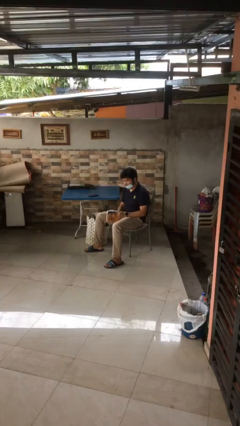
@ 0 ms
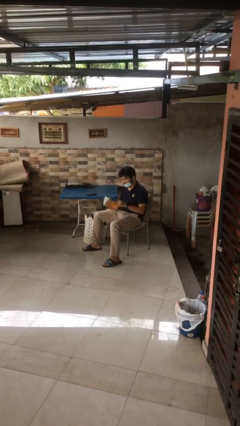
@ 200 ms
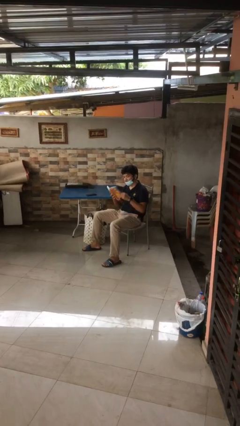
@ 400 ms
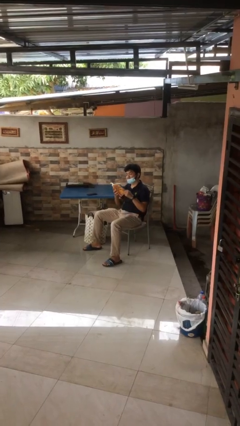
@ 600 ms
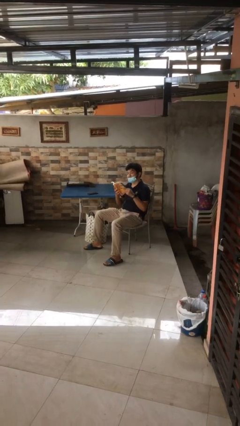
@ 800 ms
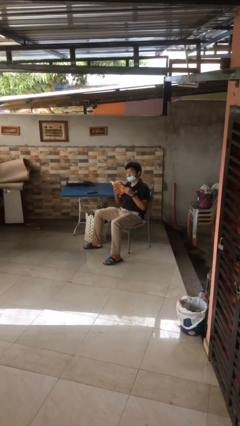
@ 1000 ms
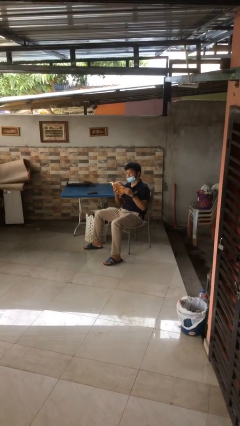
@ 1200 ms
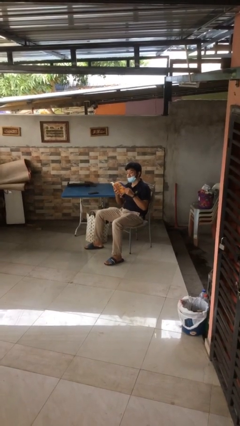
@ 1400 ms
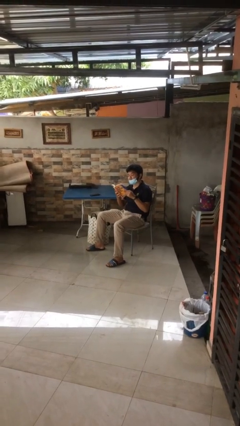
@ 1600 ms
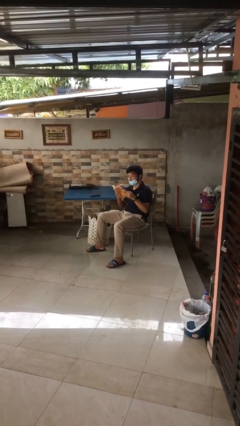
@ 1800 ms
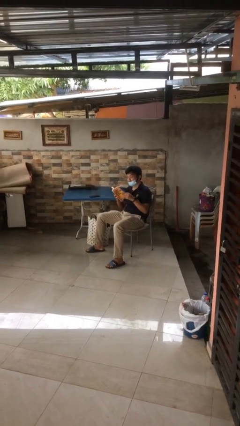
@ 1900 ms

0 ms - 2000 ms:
person reads book

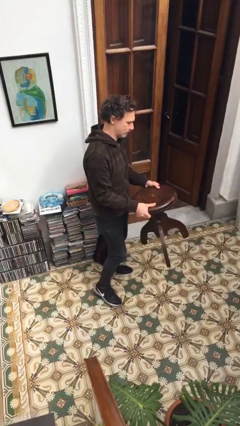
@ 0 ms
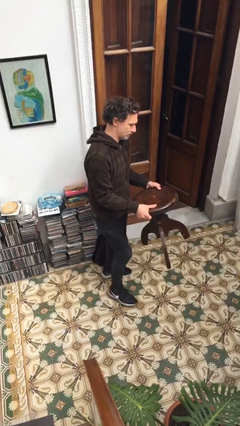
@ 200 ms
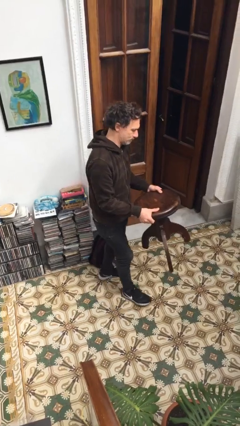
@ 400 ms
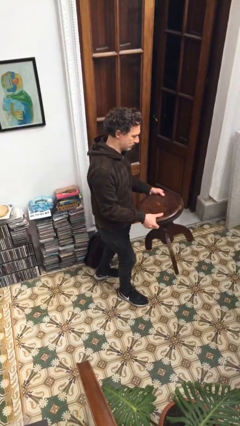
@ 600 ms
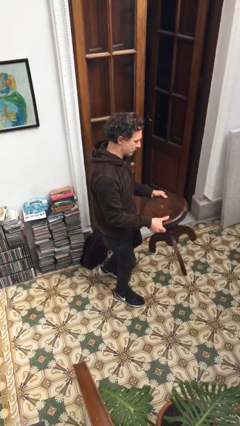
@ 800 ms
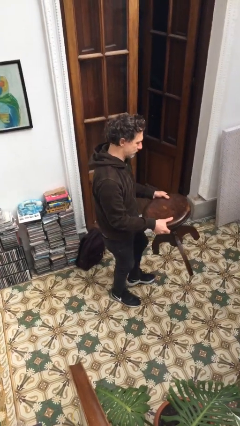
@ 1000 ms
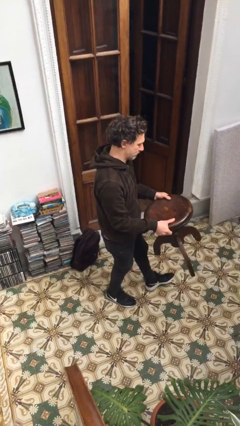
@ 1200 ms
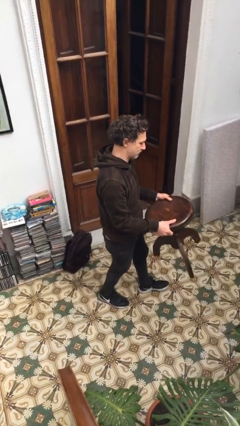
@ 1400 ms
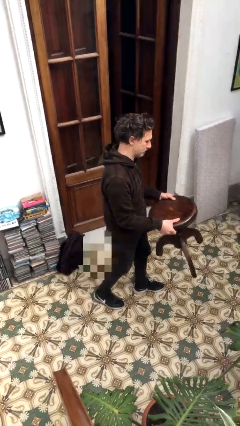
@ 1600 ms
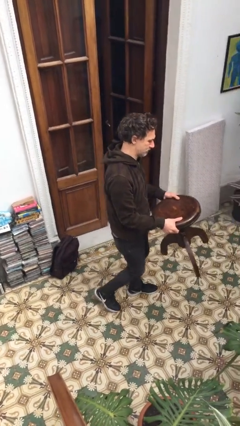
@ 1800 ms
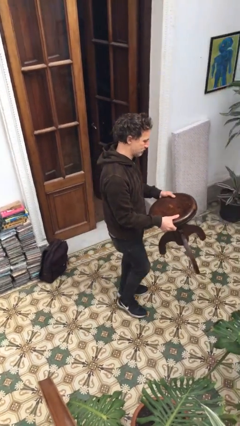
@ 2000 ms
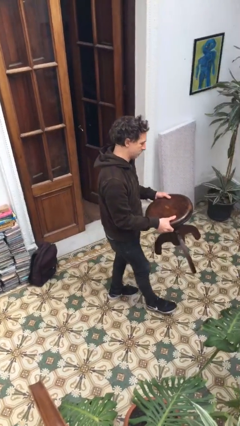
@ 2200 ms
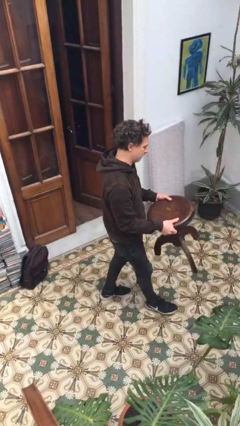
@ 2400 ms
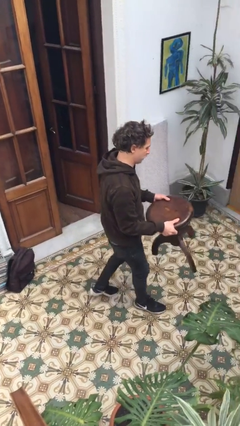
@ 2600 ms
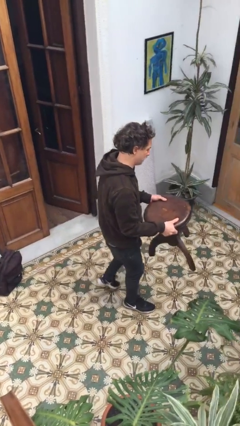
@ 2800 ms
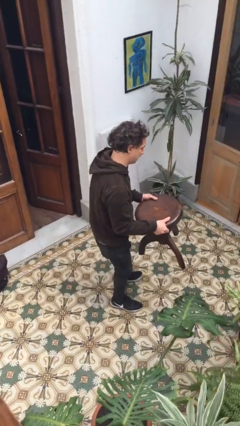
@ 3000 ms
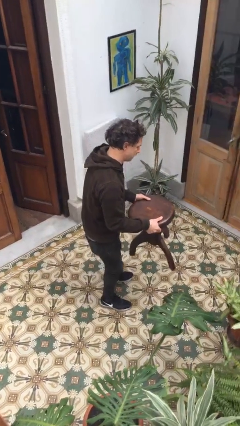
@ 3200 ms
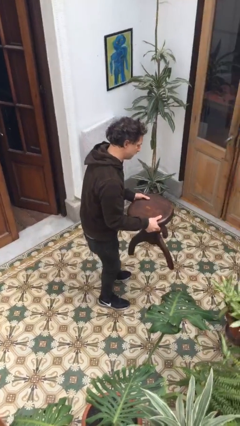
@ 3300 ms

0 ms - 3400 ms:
person carries heavy object

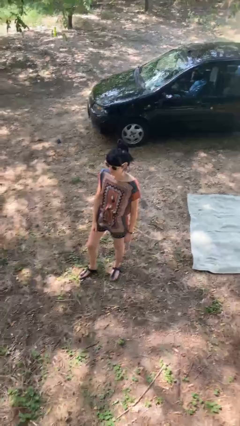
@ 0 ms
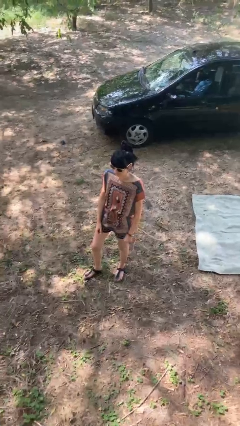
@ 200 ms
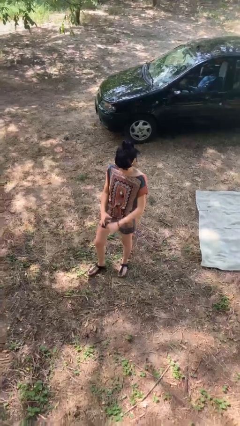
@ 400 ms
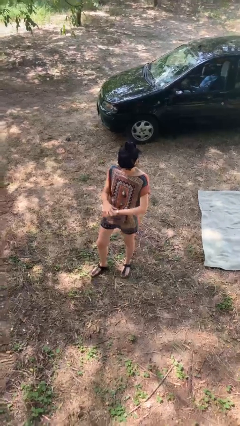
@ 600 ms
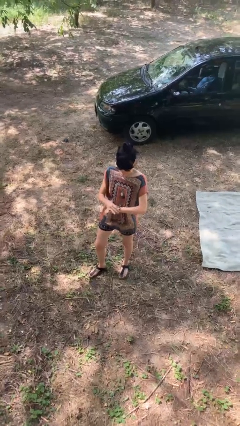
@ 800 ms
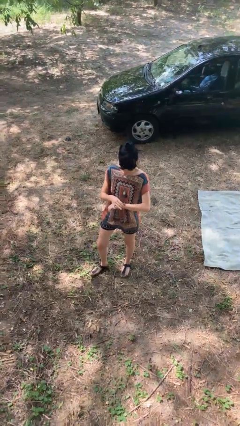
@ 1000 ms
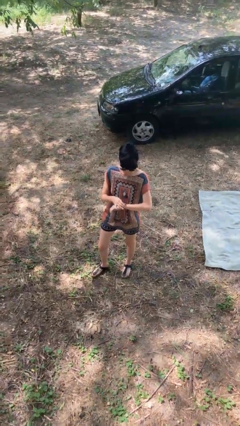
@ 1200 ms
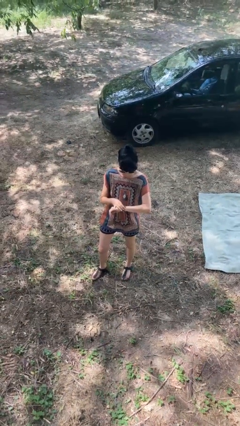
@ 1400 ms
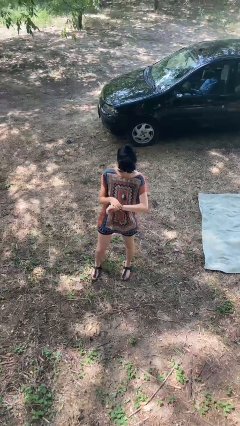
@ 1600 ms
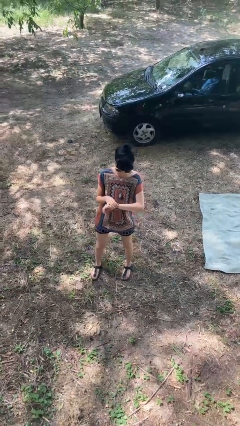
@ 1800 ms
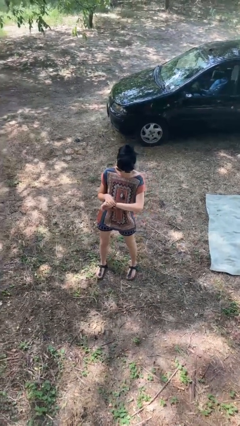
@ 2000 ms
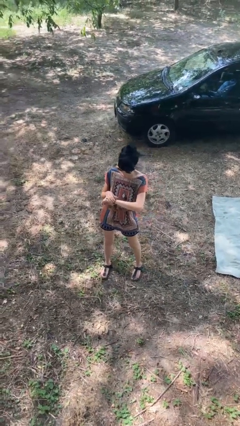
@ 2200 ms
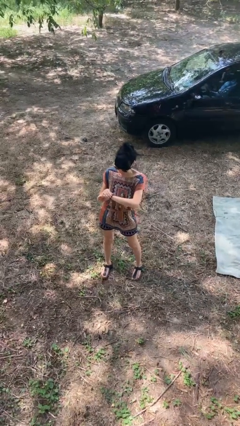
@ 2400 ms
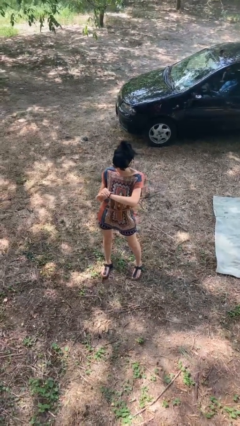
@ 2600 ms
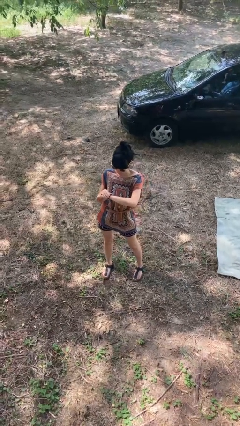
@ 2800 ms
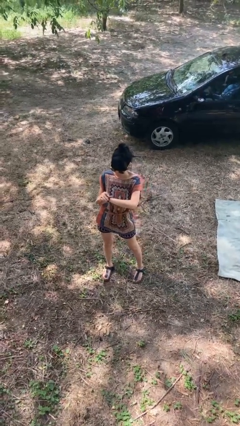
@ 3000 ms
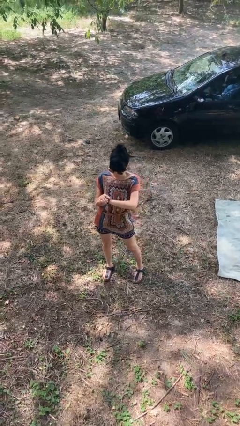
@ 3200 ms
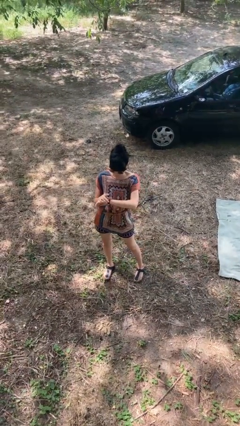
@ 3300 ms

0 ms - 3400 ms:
person looks at wristwatch

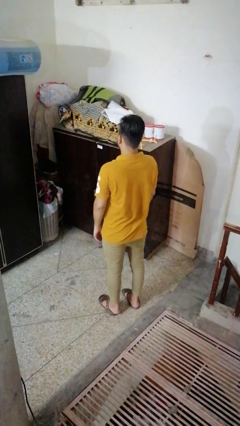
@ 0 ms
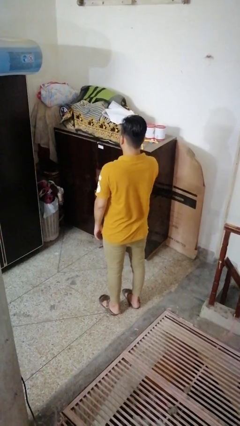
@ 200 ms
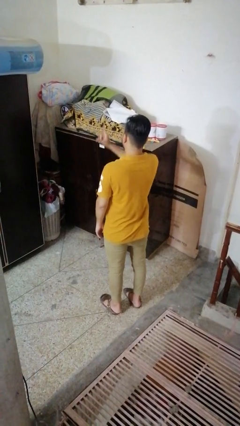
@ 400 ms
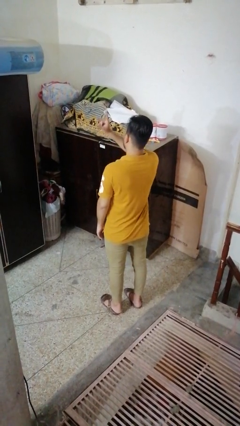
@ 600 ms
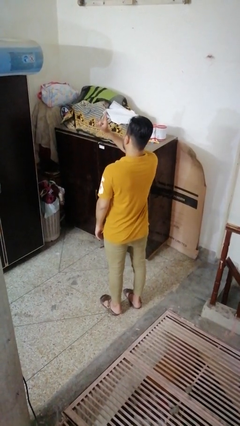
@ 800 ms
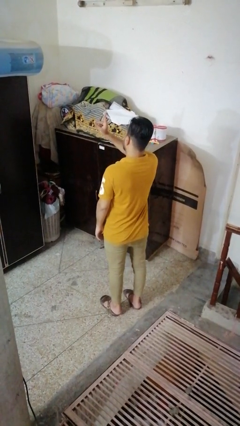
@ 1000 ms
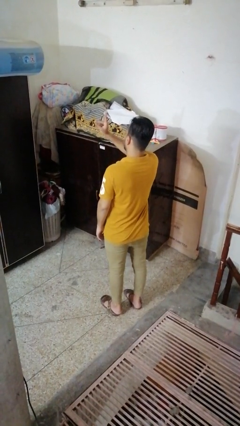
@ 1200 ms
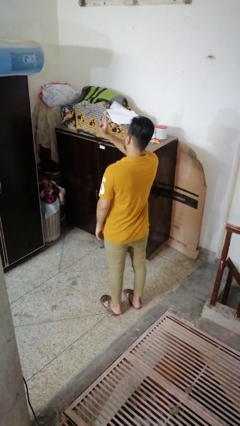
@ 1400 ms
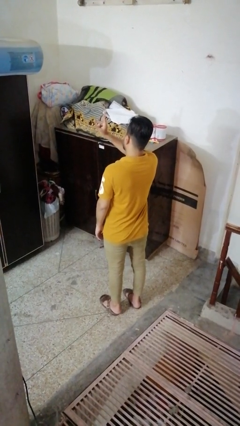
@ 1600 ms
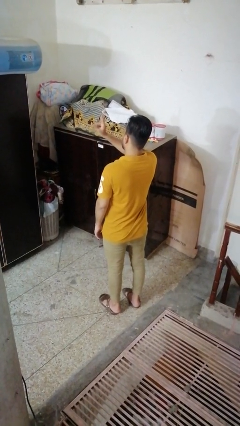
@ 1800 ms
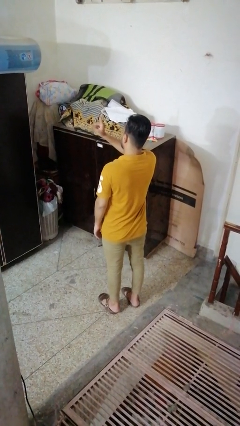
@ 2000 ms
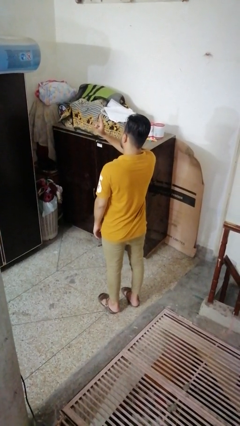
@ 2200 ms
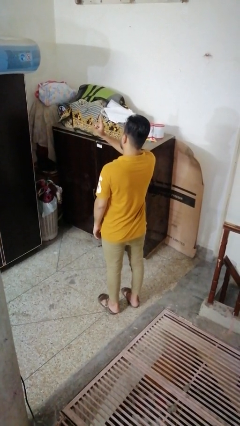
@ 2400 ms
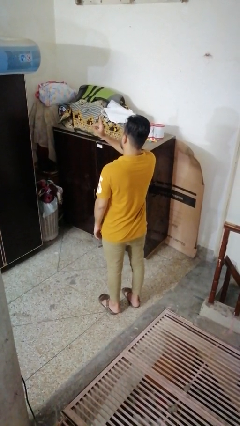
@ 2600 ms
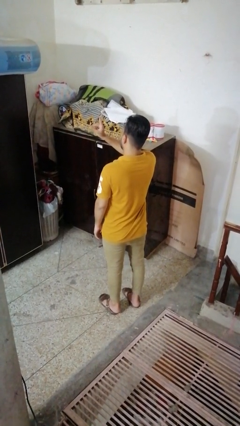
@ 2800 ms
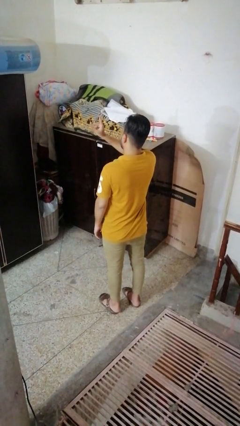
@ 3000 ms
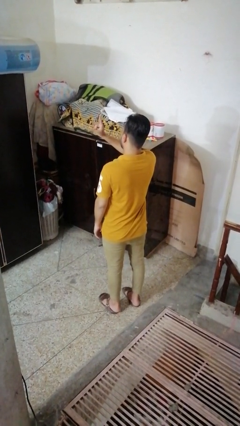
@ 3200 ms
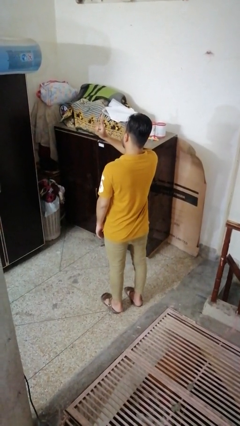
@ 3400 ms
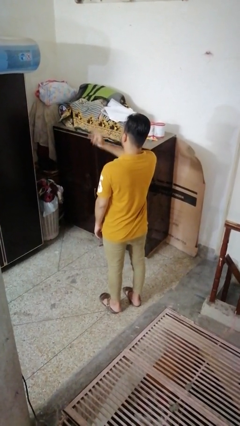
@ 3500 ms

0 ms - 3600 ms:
person snaps fingers

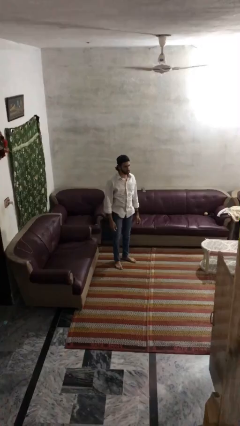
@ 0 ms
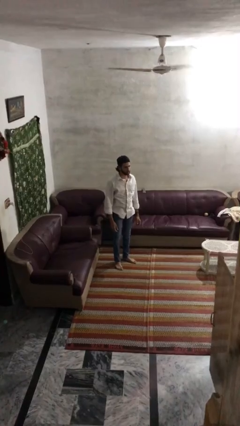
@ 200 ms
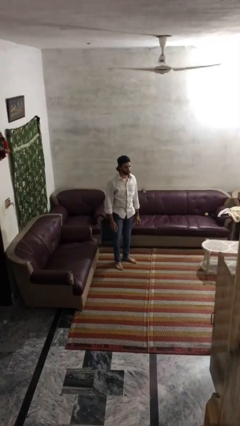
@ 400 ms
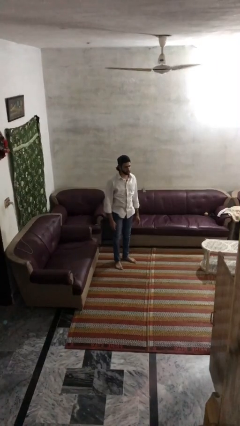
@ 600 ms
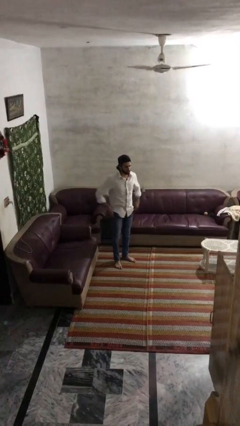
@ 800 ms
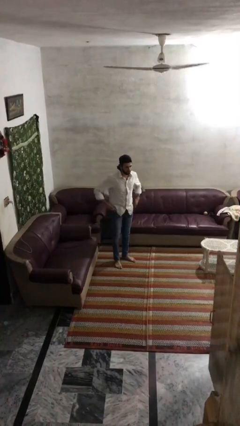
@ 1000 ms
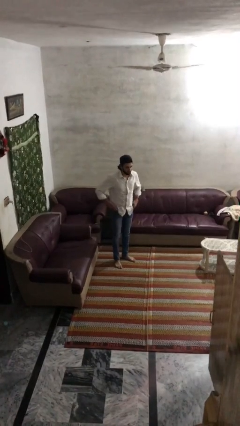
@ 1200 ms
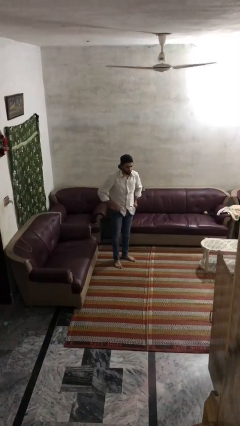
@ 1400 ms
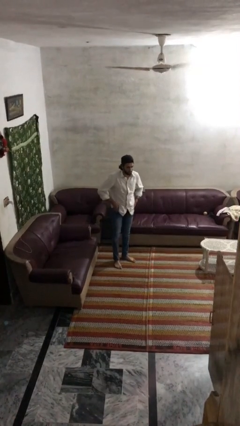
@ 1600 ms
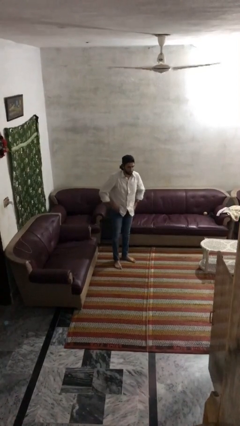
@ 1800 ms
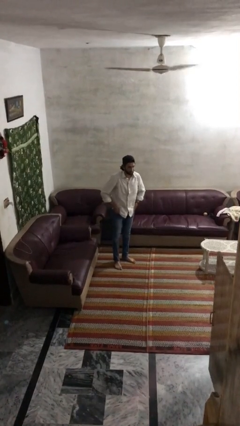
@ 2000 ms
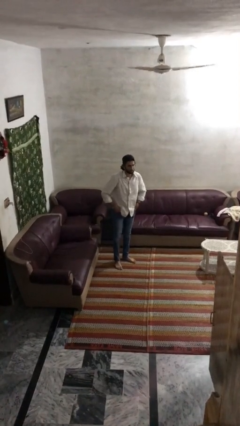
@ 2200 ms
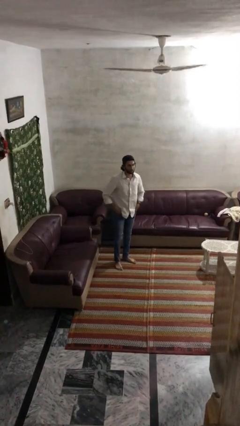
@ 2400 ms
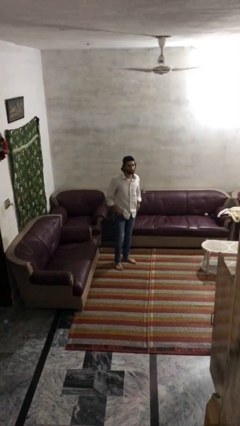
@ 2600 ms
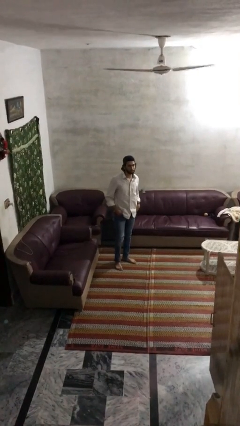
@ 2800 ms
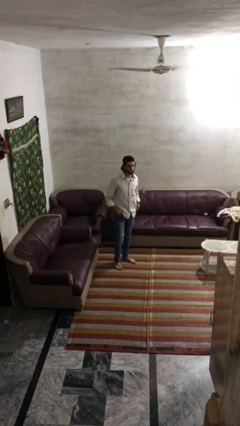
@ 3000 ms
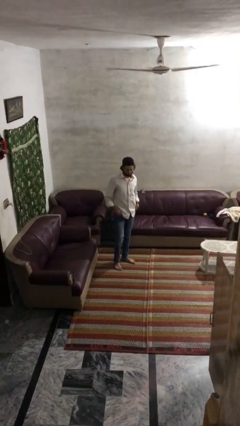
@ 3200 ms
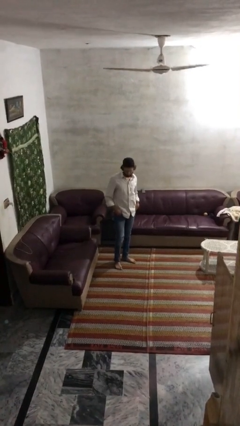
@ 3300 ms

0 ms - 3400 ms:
person puts hands in back pockets

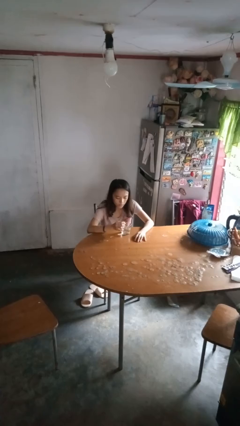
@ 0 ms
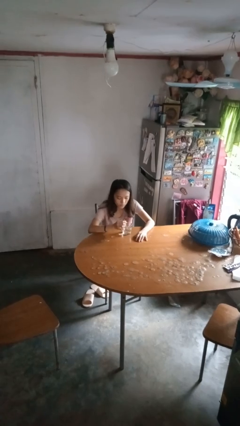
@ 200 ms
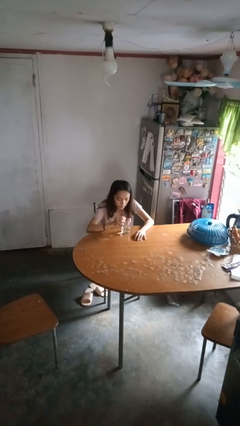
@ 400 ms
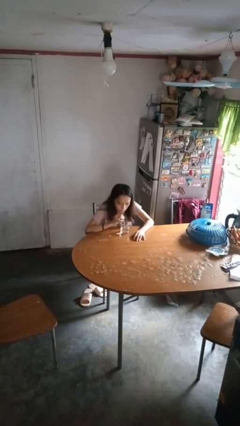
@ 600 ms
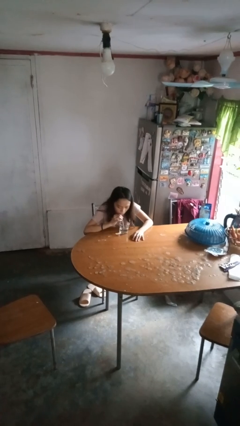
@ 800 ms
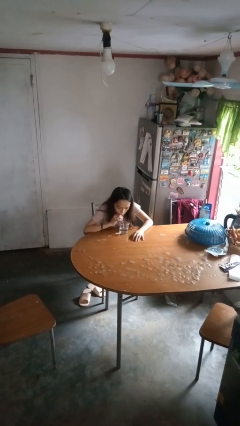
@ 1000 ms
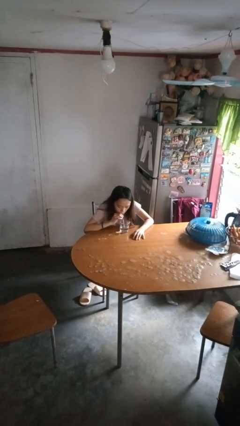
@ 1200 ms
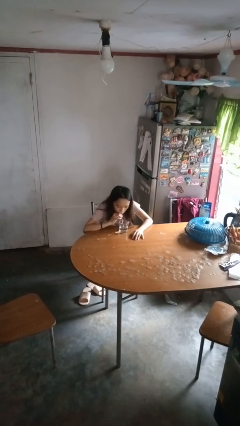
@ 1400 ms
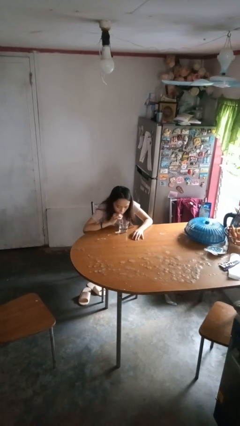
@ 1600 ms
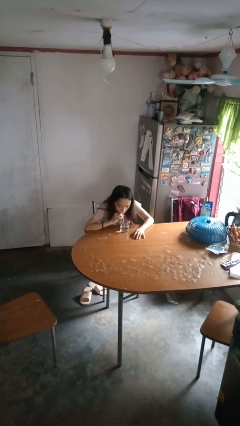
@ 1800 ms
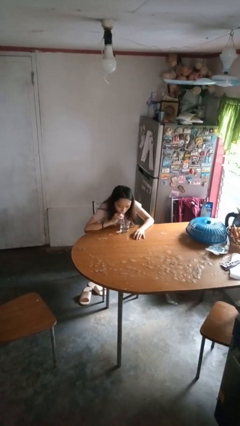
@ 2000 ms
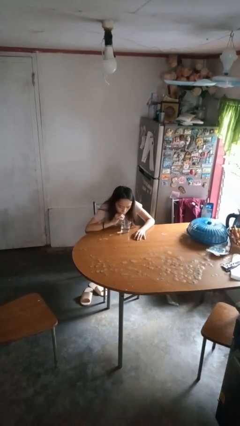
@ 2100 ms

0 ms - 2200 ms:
person drinks from straw
